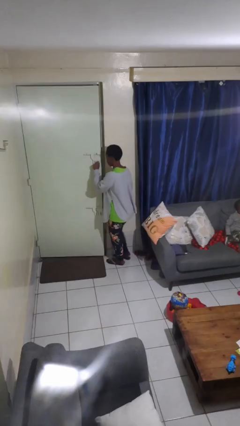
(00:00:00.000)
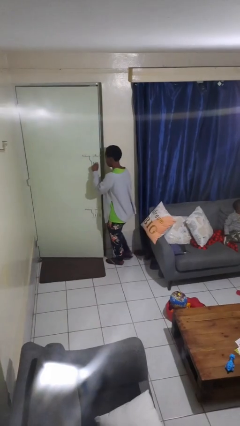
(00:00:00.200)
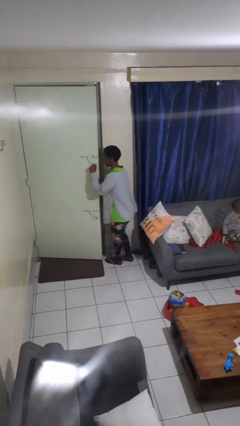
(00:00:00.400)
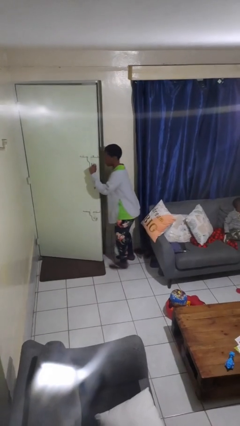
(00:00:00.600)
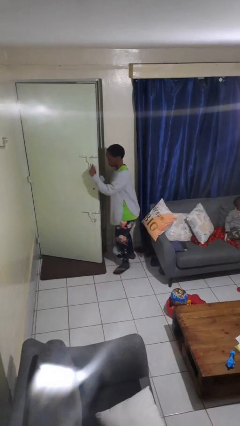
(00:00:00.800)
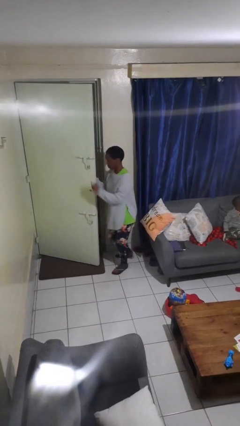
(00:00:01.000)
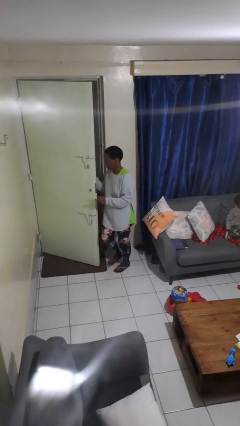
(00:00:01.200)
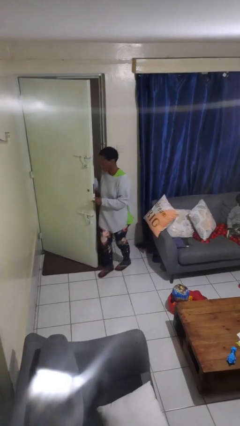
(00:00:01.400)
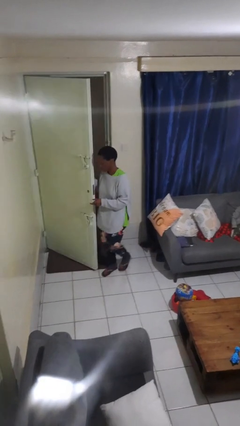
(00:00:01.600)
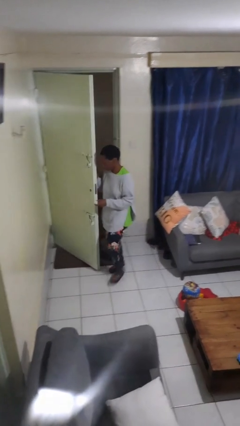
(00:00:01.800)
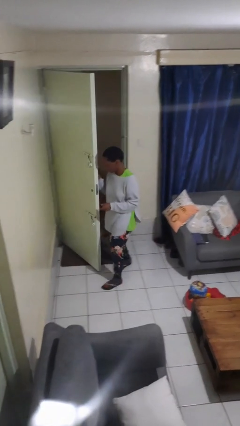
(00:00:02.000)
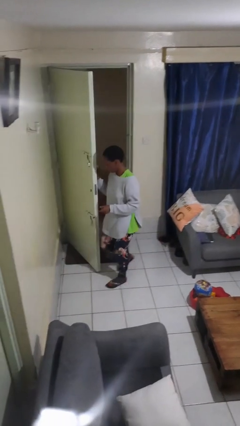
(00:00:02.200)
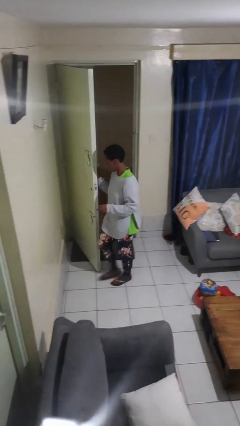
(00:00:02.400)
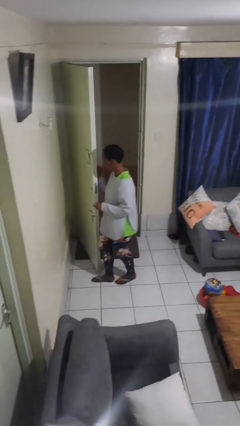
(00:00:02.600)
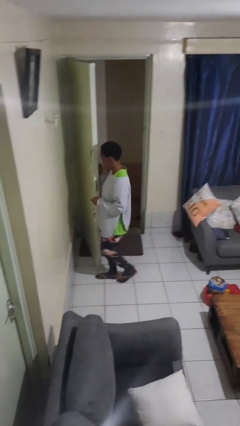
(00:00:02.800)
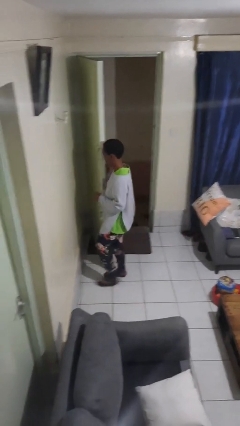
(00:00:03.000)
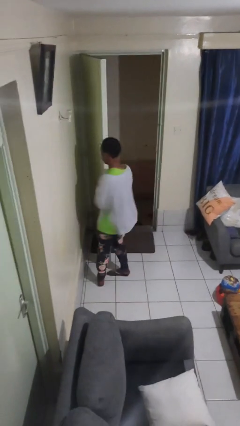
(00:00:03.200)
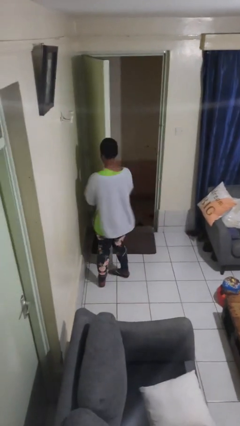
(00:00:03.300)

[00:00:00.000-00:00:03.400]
person opens facility door

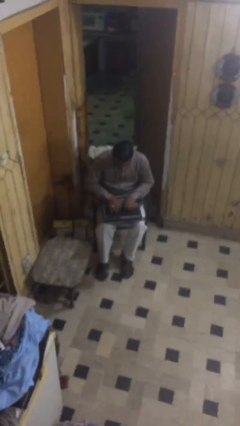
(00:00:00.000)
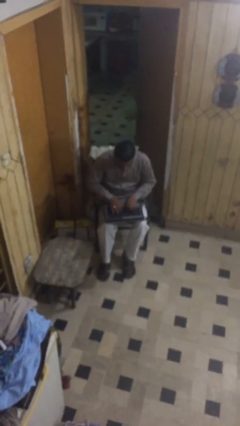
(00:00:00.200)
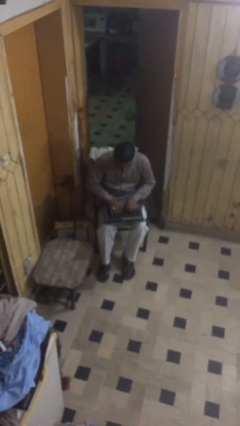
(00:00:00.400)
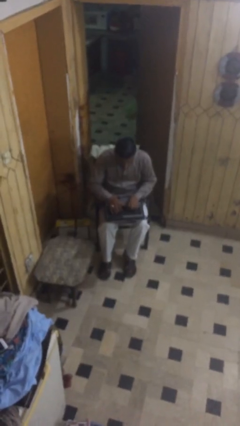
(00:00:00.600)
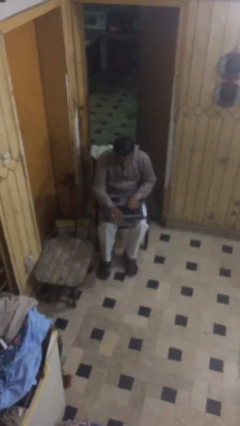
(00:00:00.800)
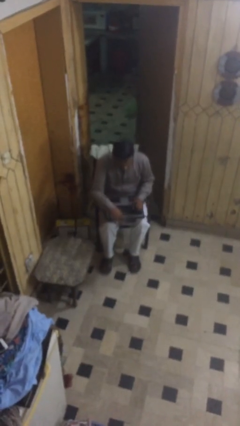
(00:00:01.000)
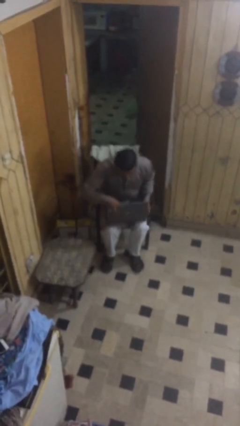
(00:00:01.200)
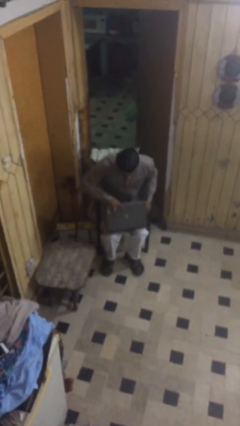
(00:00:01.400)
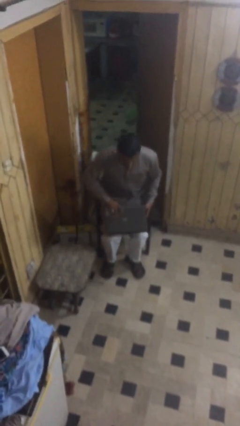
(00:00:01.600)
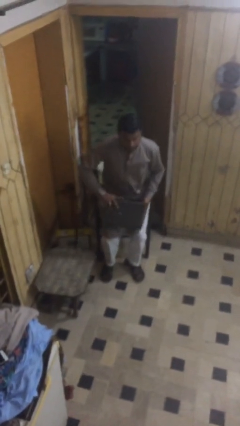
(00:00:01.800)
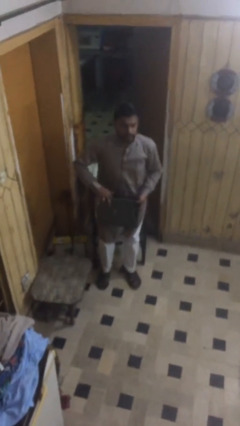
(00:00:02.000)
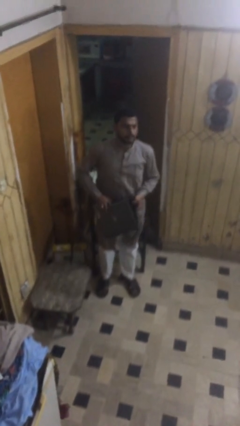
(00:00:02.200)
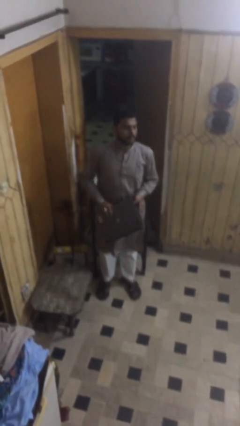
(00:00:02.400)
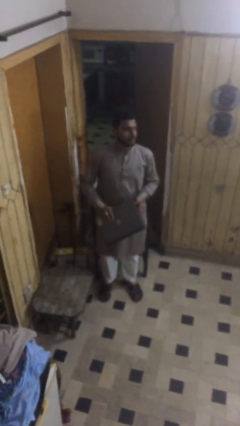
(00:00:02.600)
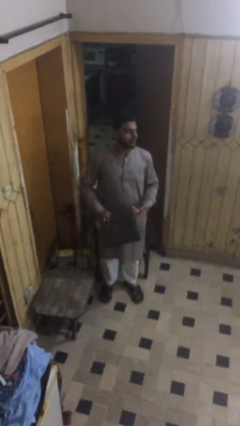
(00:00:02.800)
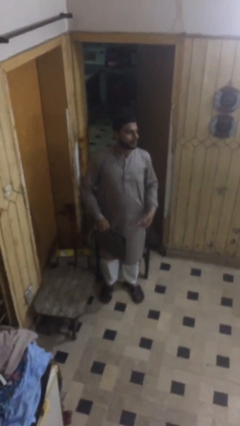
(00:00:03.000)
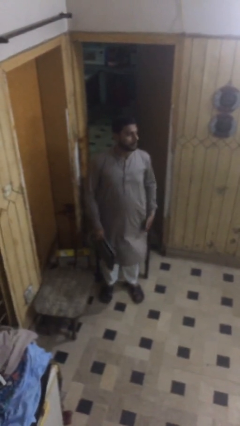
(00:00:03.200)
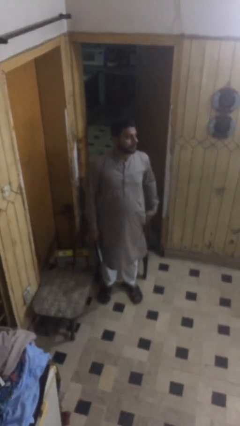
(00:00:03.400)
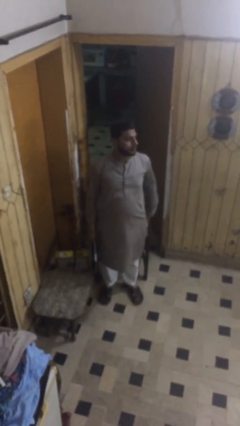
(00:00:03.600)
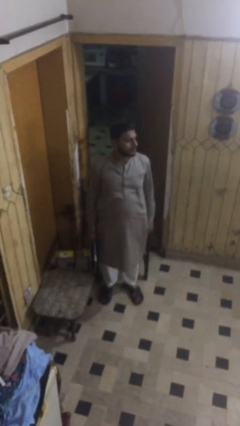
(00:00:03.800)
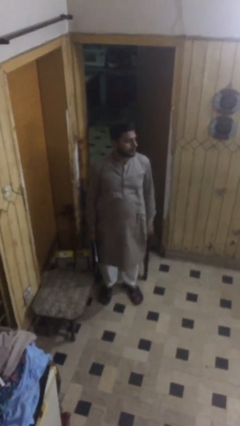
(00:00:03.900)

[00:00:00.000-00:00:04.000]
person stands up

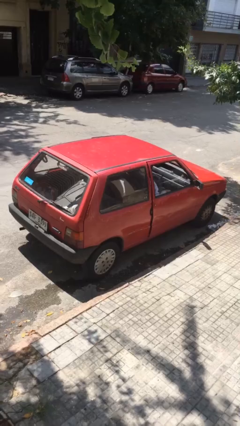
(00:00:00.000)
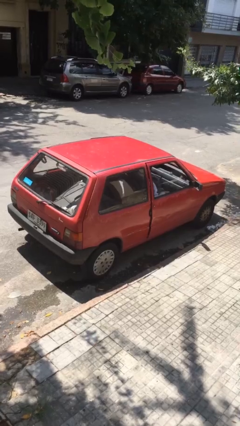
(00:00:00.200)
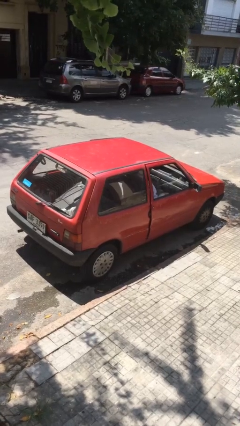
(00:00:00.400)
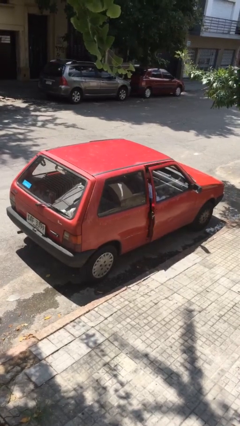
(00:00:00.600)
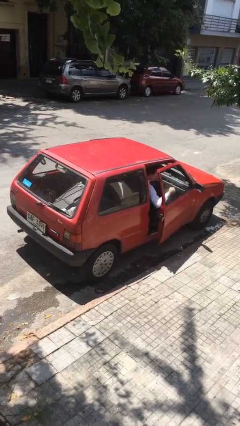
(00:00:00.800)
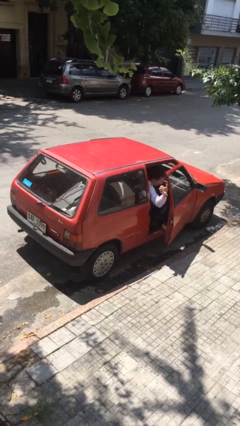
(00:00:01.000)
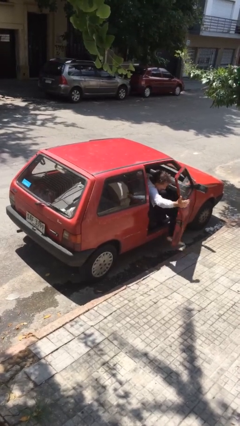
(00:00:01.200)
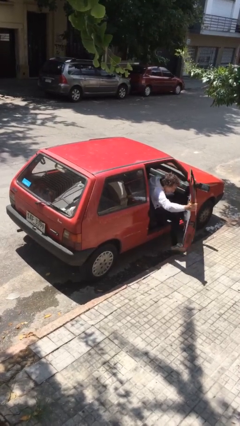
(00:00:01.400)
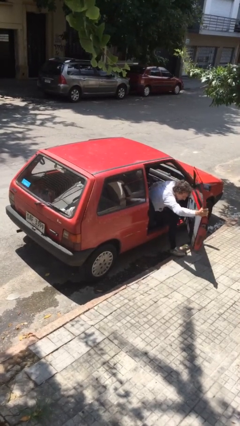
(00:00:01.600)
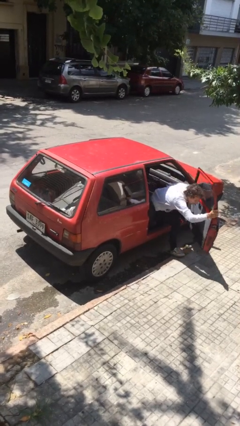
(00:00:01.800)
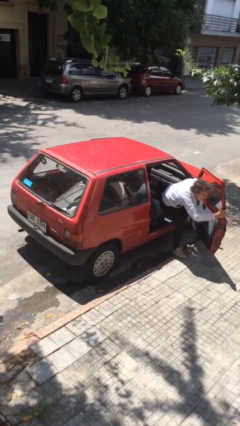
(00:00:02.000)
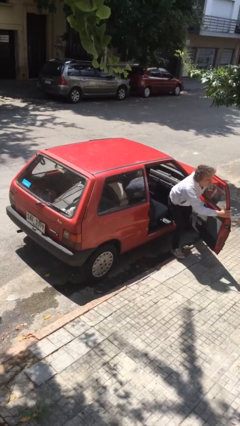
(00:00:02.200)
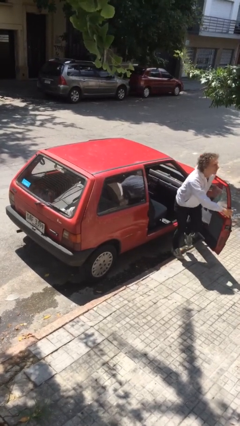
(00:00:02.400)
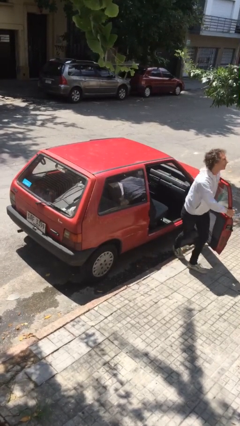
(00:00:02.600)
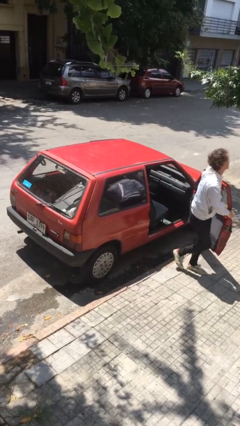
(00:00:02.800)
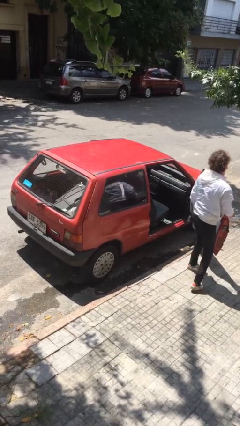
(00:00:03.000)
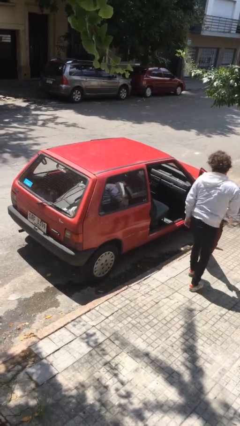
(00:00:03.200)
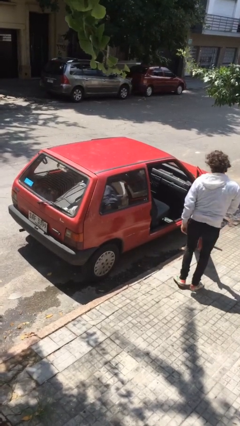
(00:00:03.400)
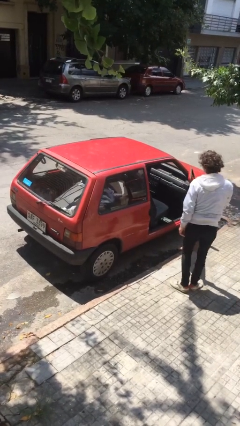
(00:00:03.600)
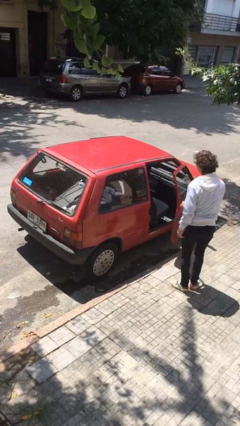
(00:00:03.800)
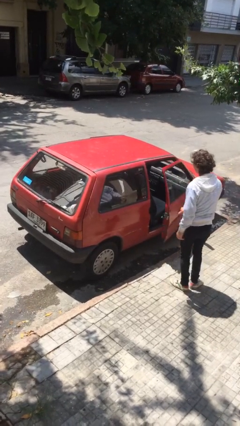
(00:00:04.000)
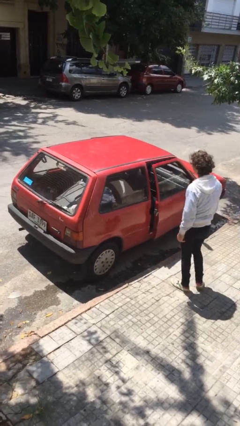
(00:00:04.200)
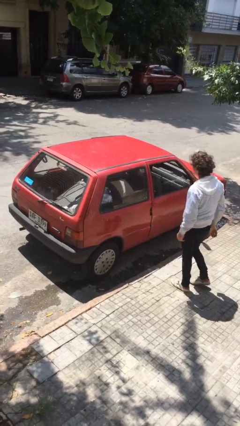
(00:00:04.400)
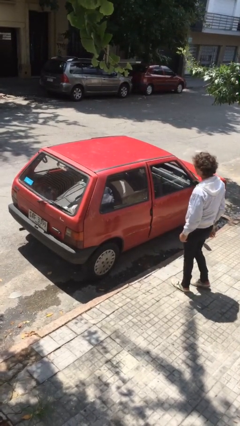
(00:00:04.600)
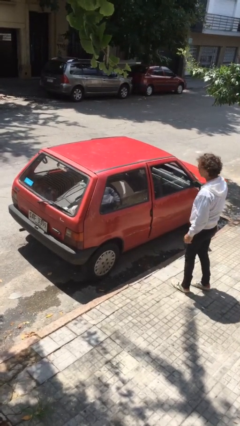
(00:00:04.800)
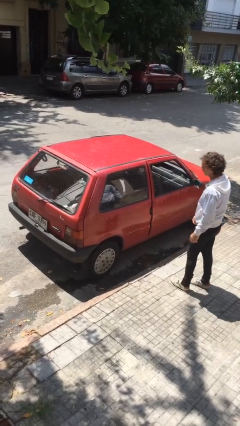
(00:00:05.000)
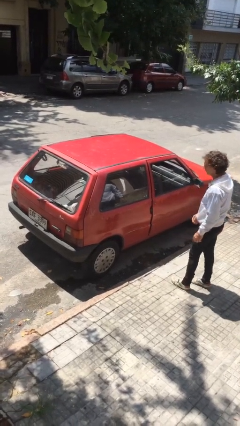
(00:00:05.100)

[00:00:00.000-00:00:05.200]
car drops off person

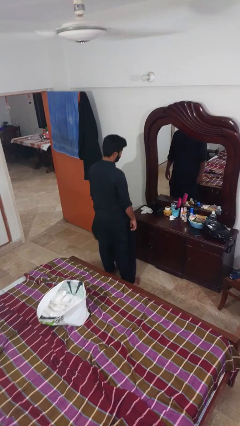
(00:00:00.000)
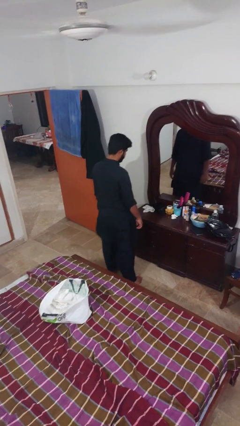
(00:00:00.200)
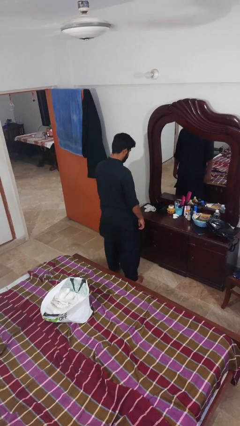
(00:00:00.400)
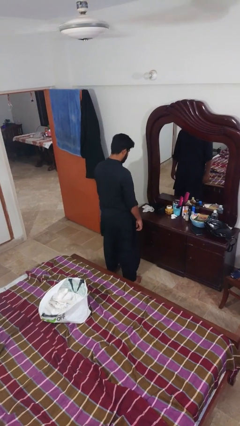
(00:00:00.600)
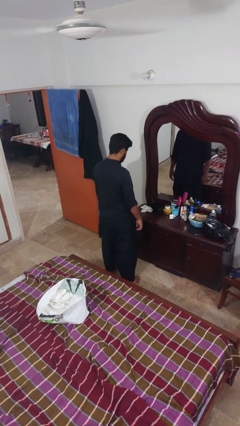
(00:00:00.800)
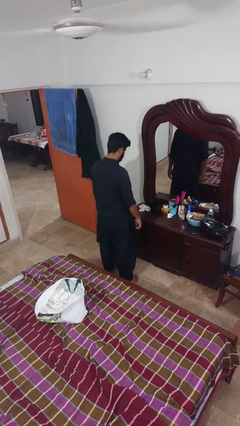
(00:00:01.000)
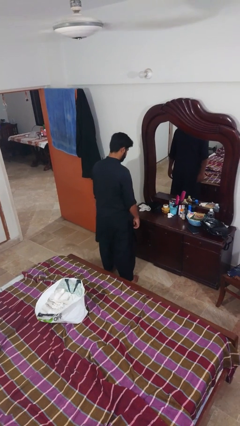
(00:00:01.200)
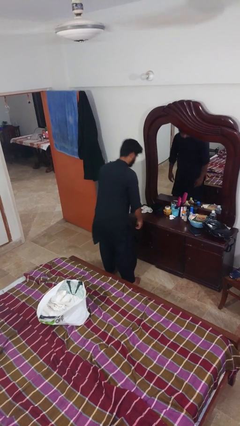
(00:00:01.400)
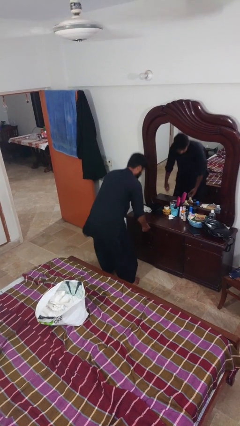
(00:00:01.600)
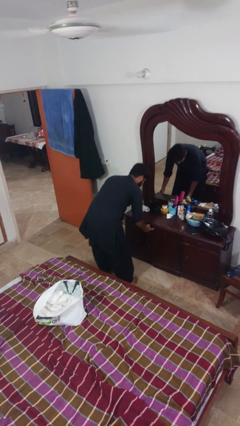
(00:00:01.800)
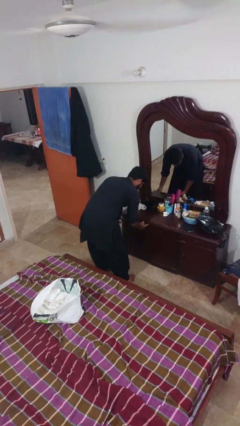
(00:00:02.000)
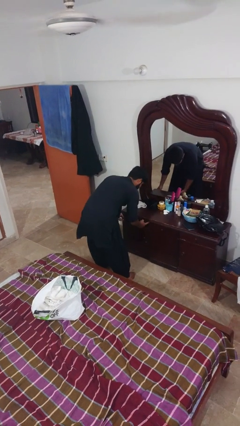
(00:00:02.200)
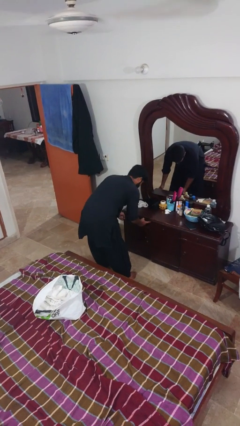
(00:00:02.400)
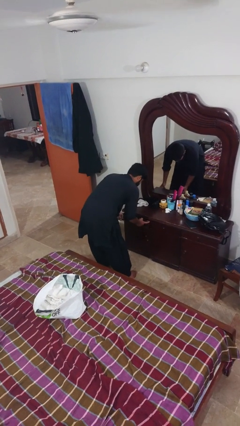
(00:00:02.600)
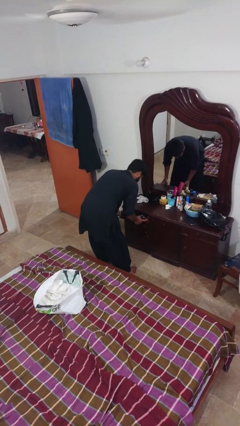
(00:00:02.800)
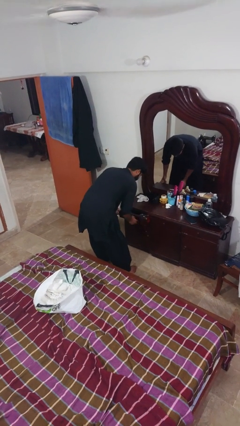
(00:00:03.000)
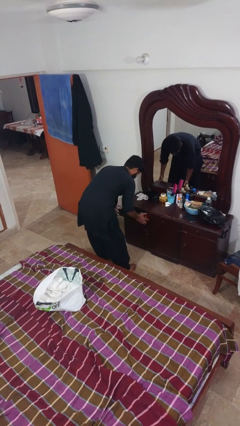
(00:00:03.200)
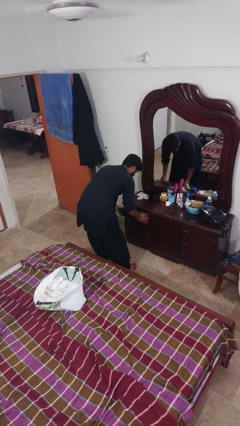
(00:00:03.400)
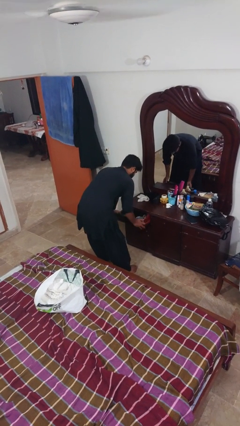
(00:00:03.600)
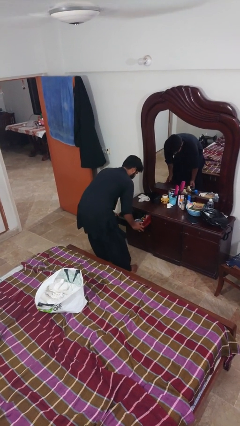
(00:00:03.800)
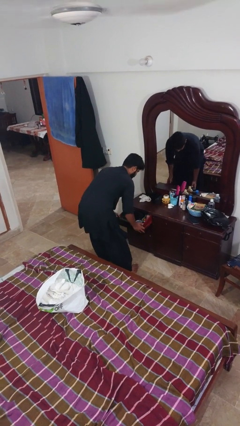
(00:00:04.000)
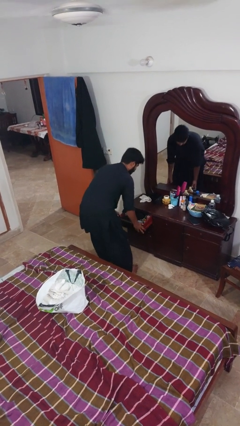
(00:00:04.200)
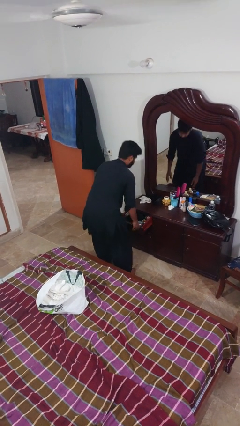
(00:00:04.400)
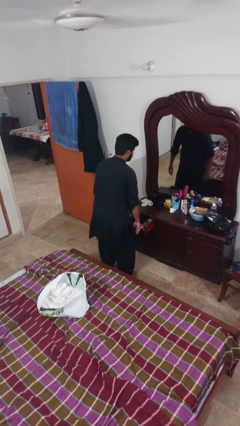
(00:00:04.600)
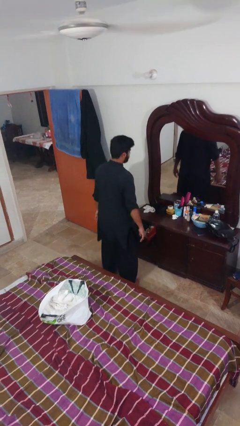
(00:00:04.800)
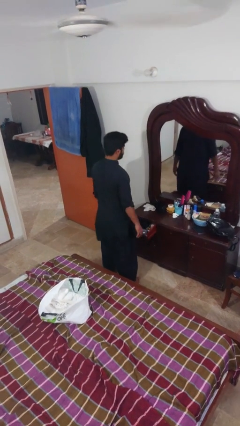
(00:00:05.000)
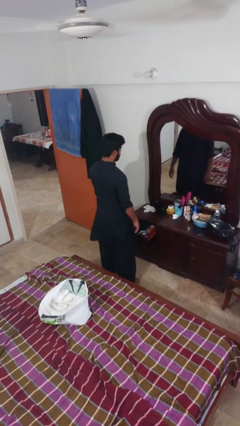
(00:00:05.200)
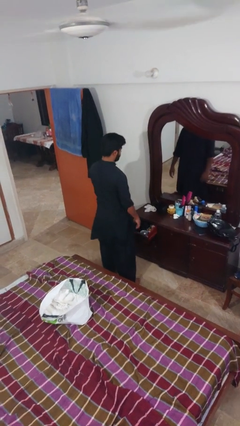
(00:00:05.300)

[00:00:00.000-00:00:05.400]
person opens dresser drawer
